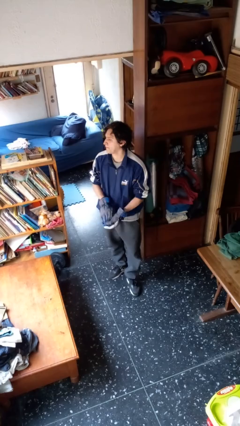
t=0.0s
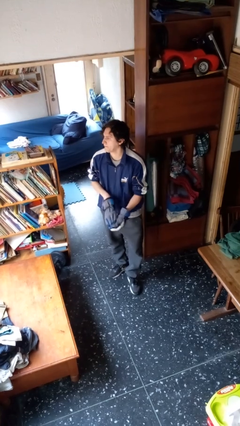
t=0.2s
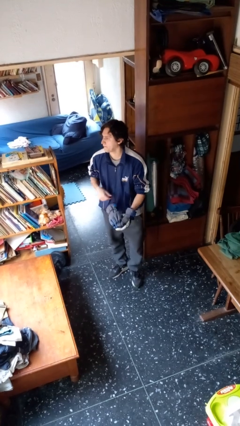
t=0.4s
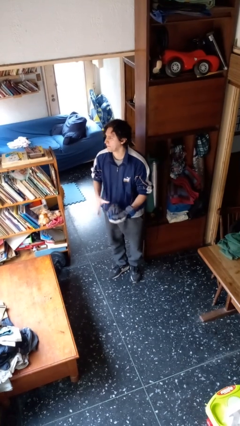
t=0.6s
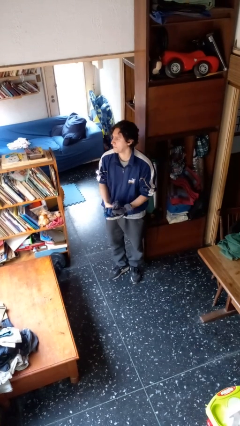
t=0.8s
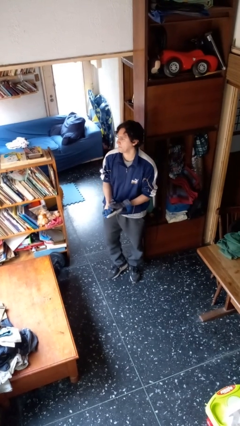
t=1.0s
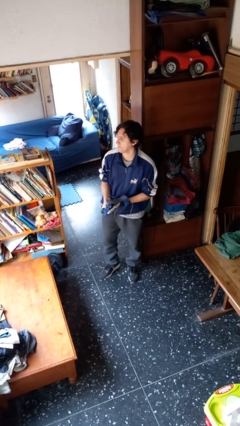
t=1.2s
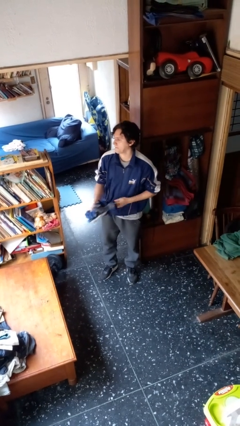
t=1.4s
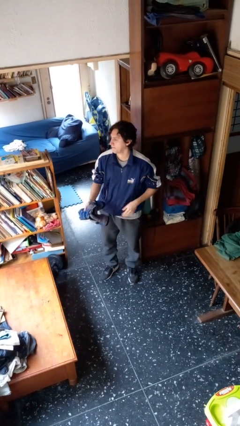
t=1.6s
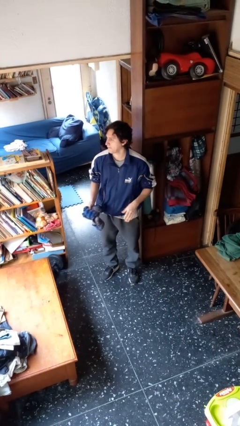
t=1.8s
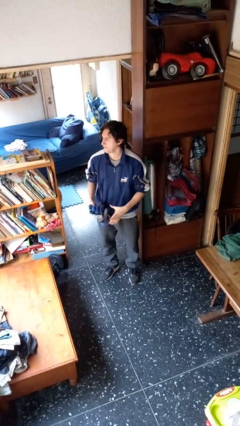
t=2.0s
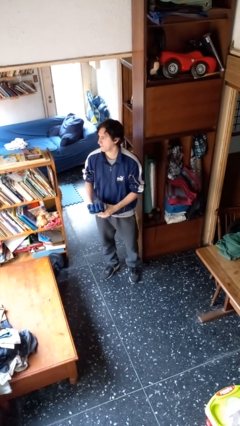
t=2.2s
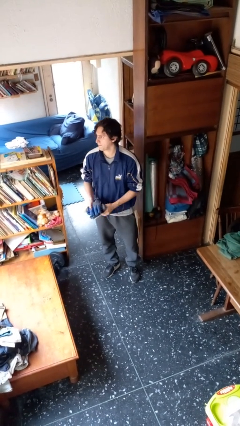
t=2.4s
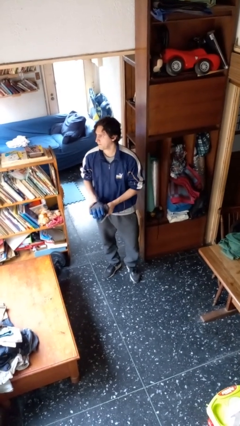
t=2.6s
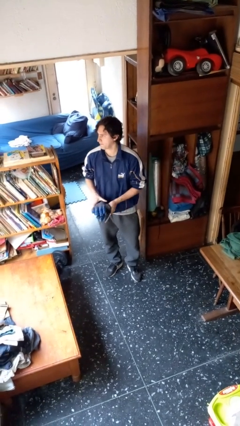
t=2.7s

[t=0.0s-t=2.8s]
person takes off gloves

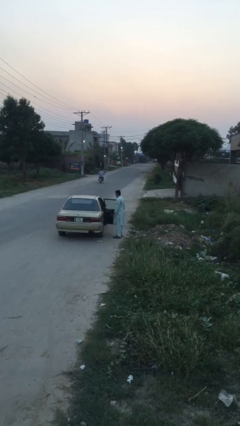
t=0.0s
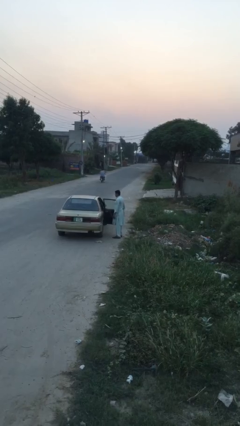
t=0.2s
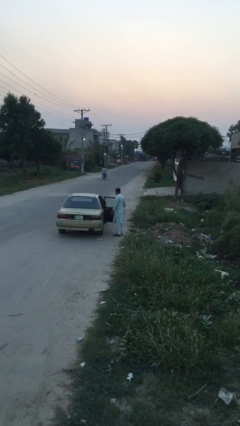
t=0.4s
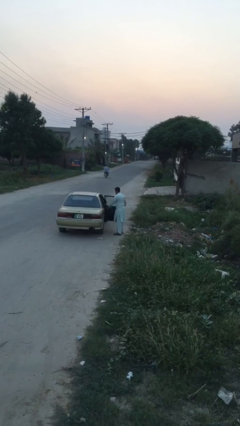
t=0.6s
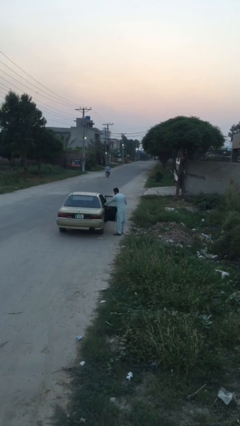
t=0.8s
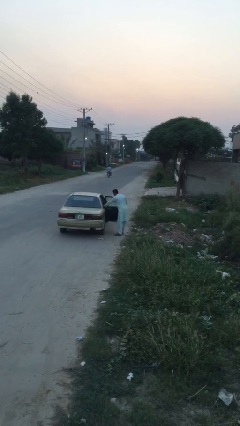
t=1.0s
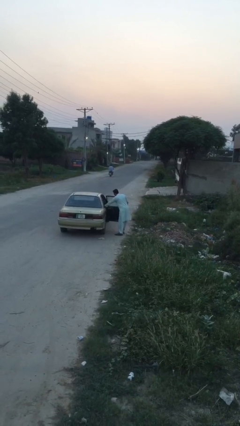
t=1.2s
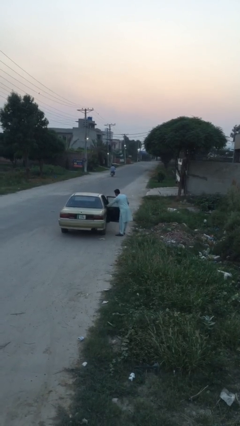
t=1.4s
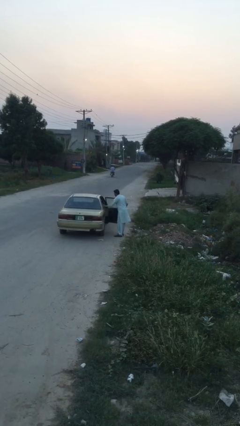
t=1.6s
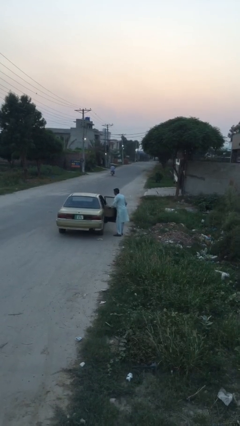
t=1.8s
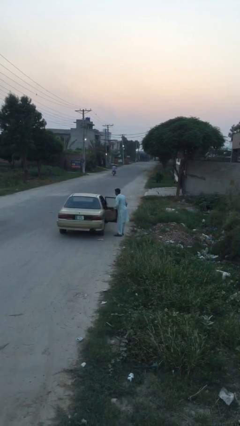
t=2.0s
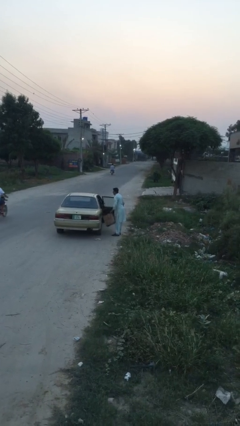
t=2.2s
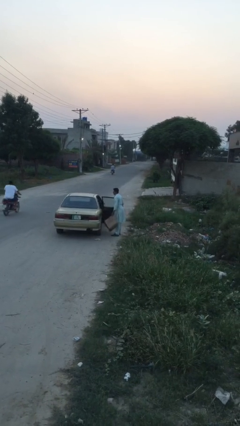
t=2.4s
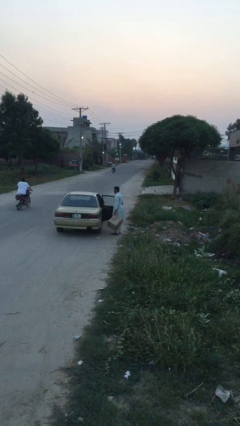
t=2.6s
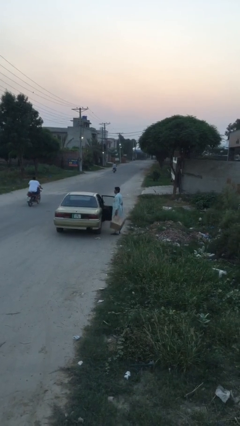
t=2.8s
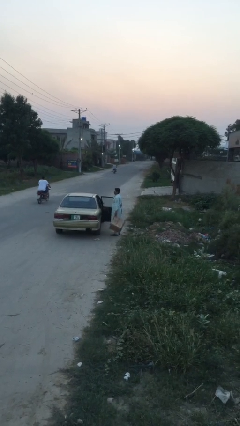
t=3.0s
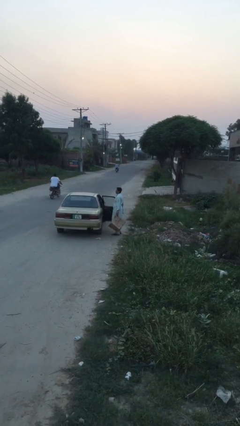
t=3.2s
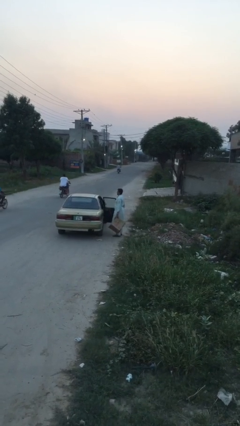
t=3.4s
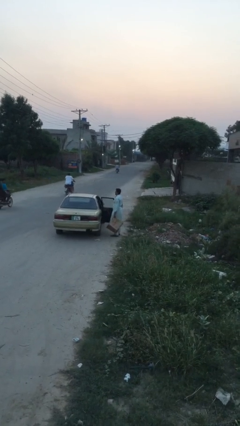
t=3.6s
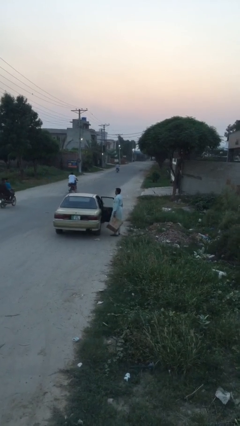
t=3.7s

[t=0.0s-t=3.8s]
person unloads car

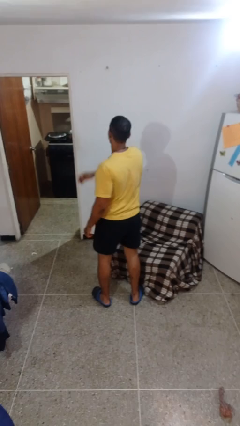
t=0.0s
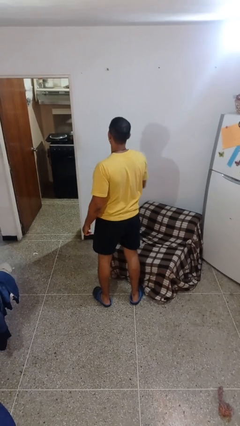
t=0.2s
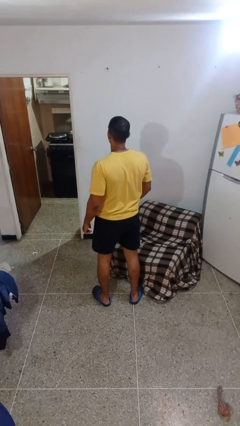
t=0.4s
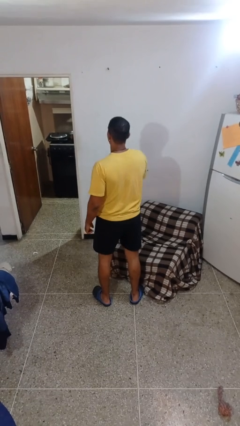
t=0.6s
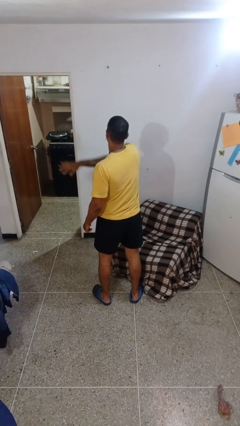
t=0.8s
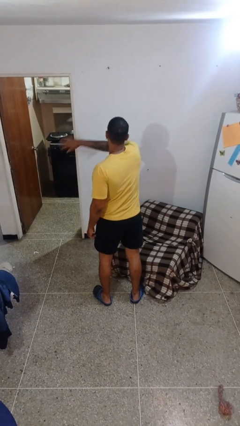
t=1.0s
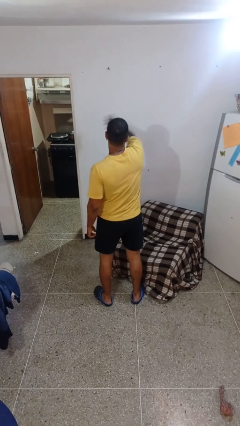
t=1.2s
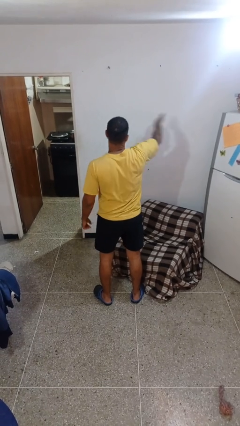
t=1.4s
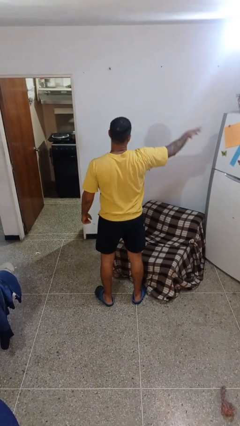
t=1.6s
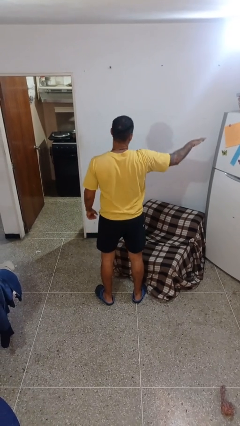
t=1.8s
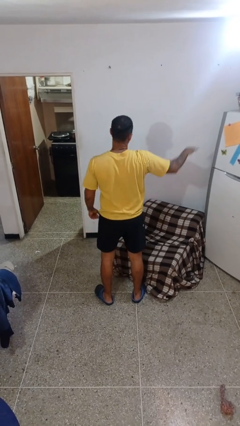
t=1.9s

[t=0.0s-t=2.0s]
person gestures swipe right

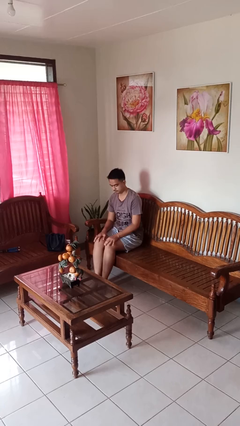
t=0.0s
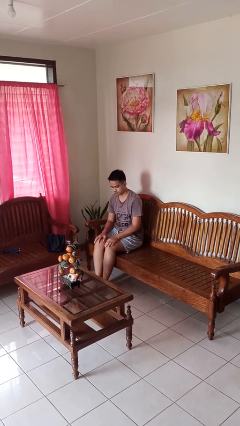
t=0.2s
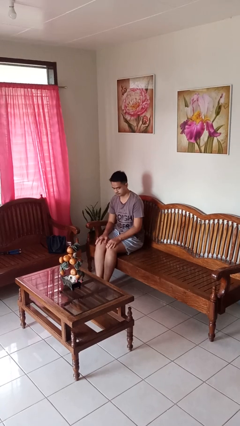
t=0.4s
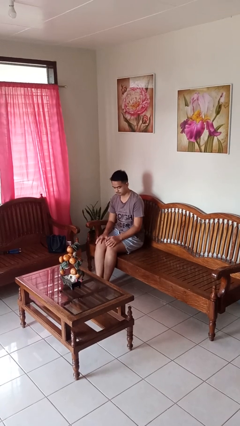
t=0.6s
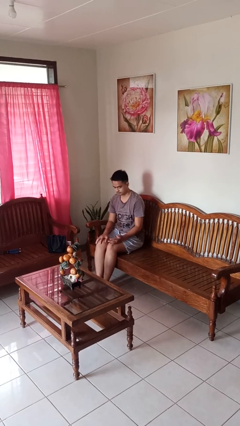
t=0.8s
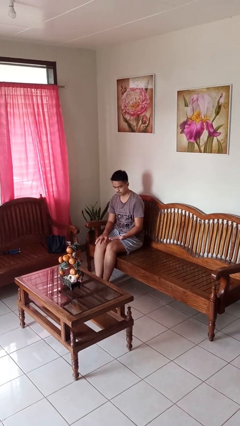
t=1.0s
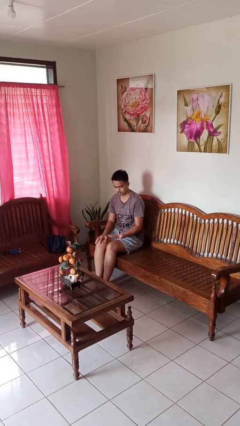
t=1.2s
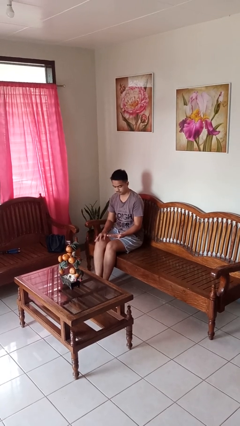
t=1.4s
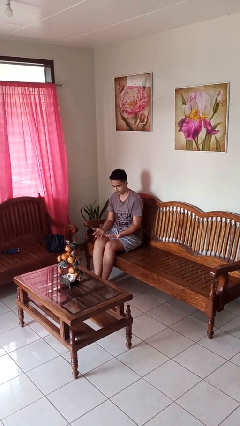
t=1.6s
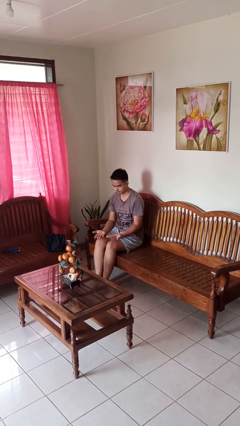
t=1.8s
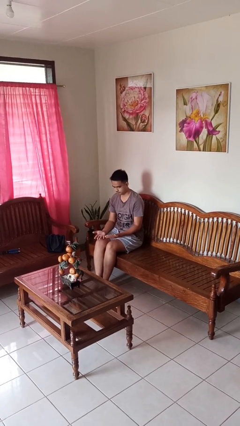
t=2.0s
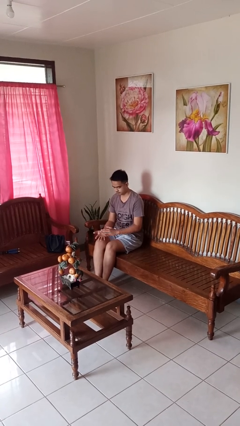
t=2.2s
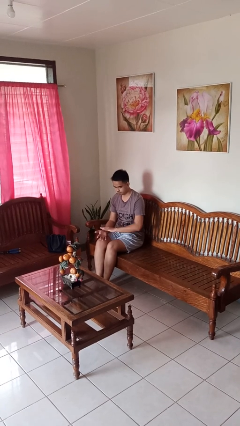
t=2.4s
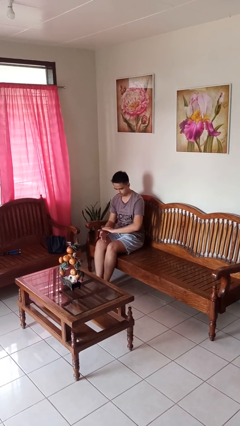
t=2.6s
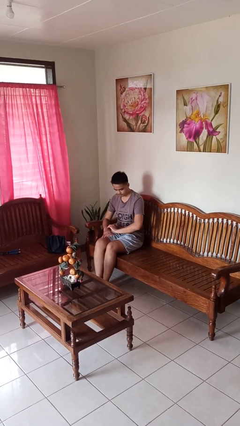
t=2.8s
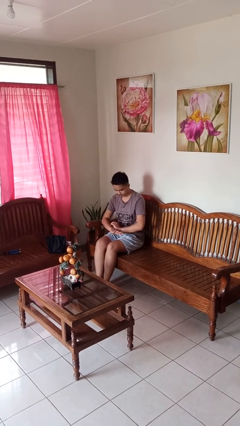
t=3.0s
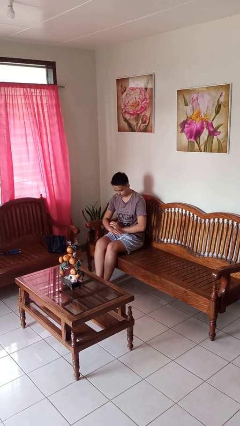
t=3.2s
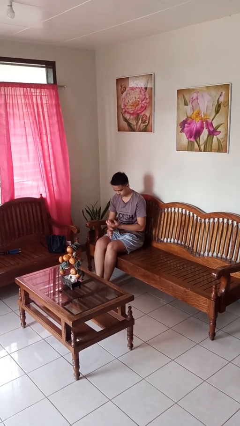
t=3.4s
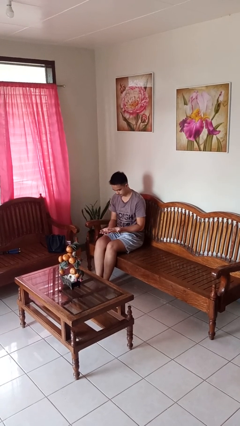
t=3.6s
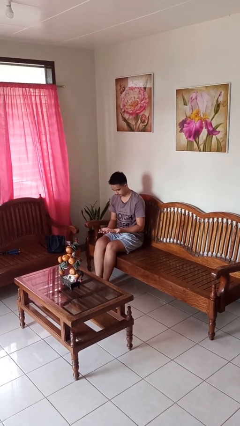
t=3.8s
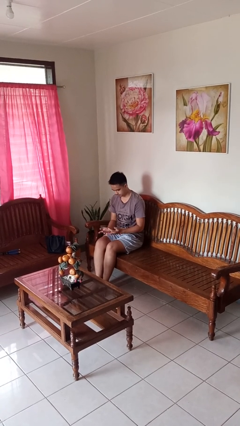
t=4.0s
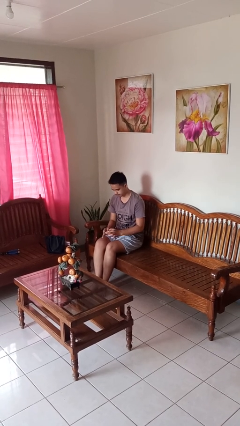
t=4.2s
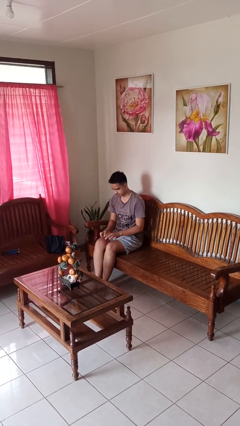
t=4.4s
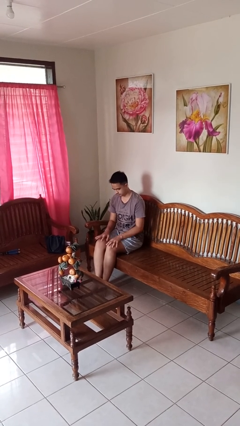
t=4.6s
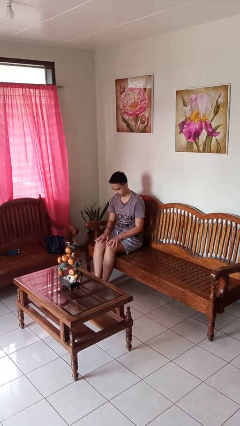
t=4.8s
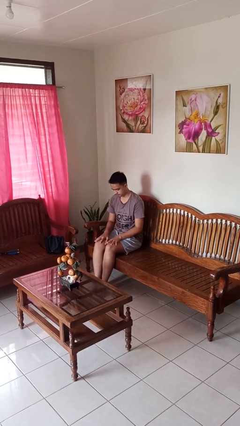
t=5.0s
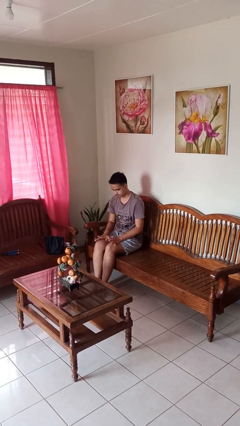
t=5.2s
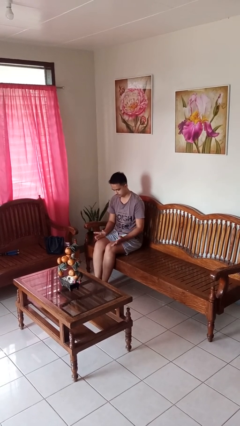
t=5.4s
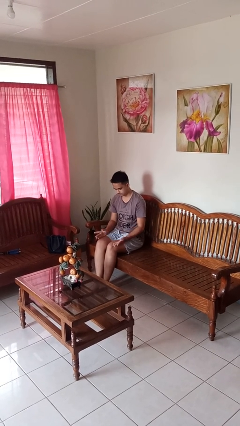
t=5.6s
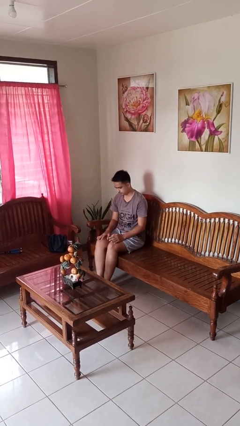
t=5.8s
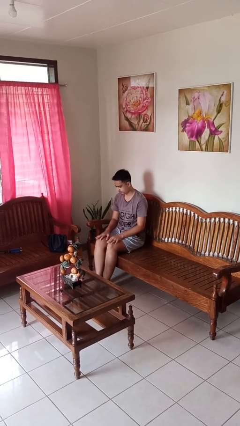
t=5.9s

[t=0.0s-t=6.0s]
person looks at hands in lap

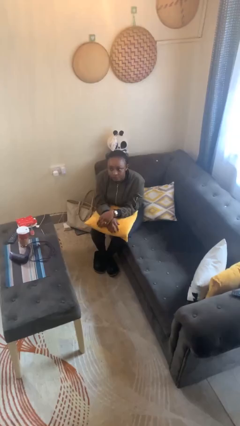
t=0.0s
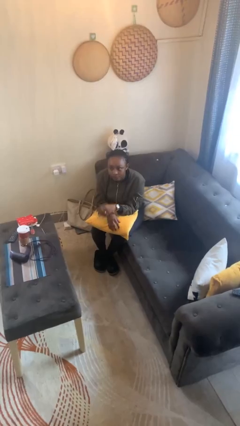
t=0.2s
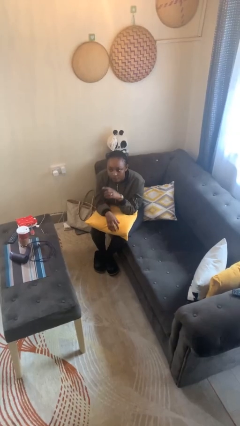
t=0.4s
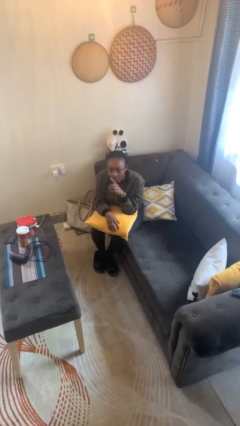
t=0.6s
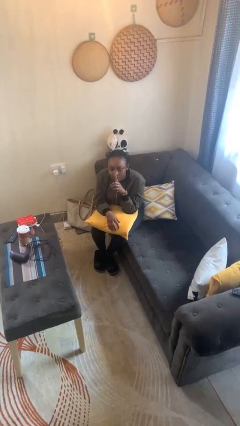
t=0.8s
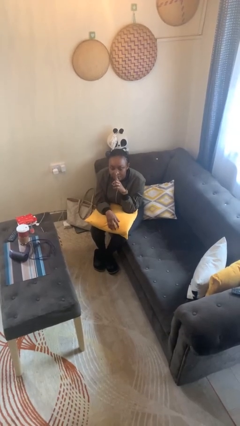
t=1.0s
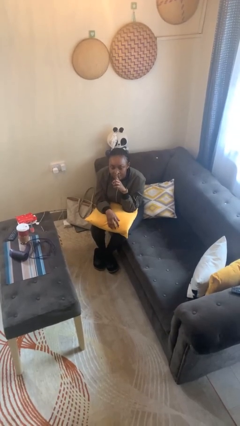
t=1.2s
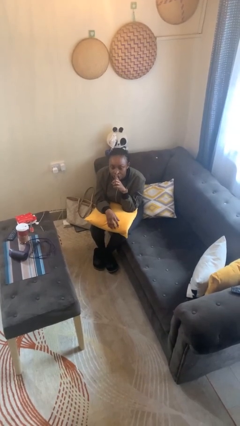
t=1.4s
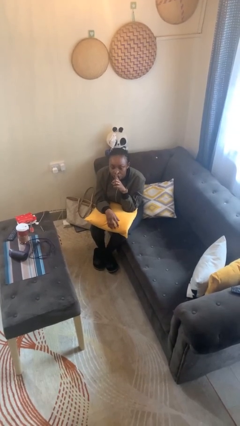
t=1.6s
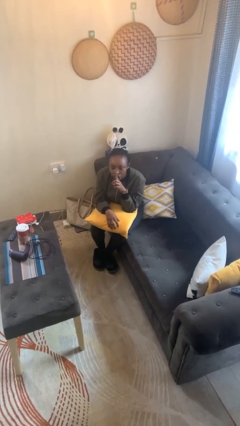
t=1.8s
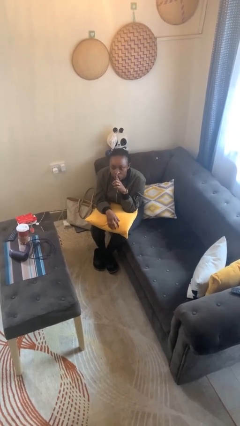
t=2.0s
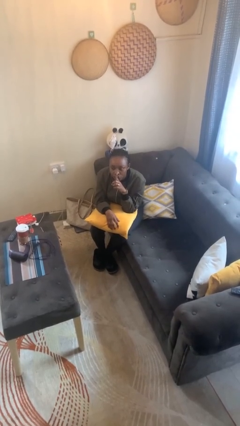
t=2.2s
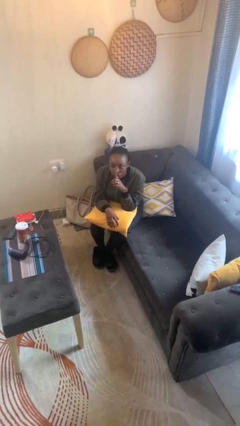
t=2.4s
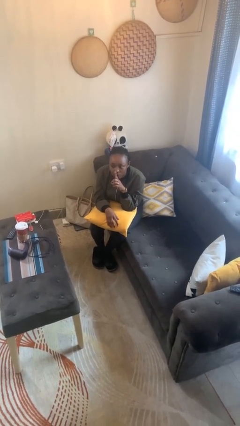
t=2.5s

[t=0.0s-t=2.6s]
person gestures be quiet
